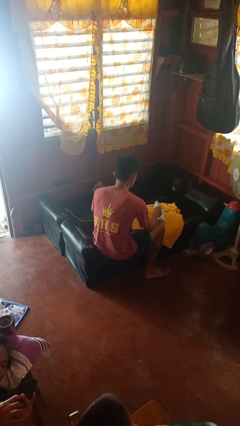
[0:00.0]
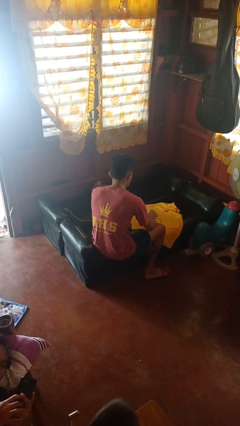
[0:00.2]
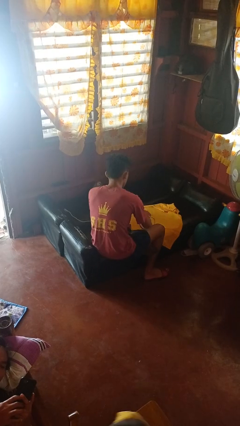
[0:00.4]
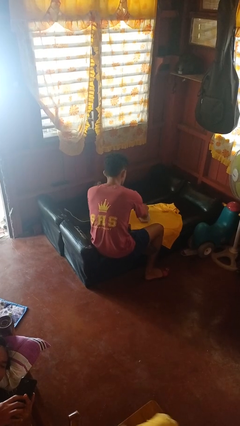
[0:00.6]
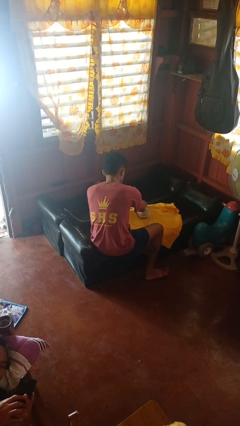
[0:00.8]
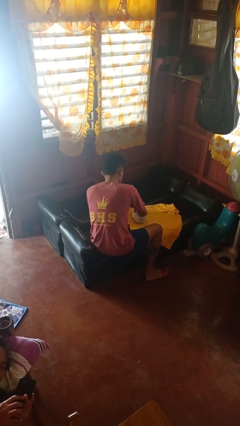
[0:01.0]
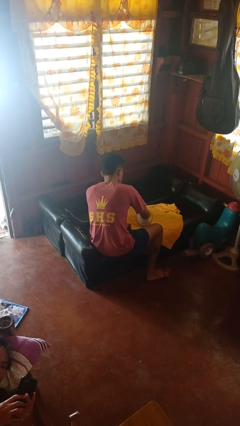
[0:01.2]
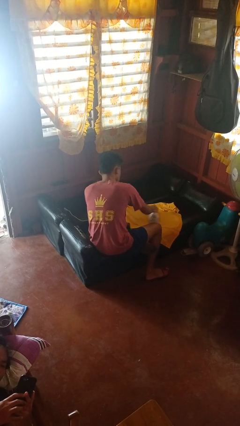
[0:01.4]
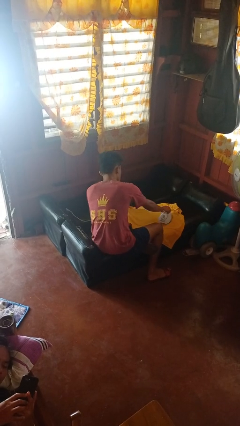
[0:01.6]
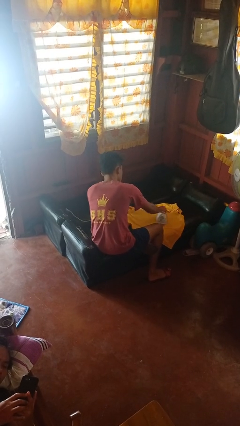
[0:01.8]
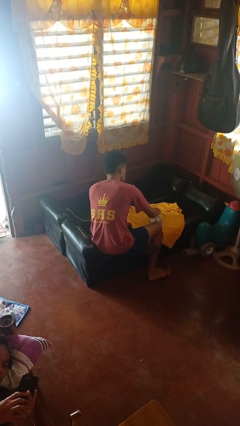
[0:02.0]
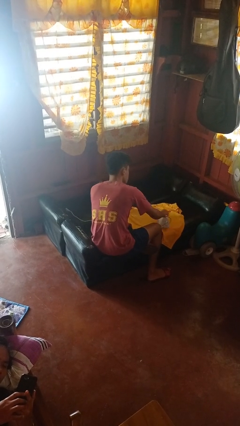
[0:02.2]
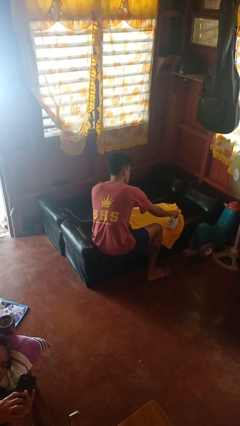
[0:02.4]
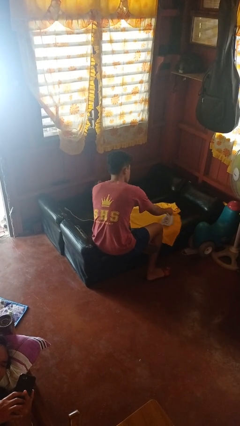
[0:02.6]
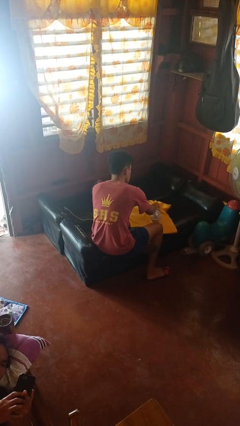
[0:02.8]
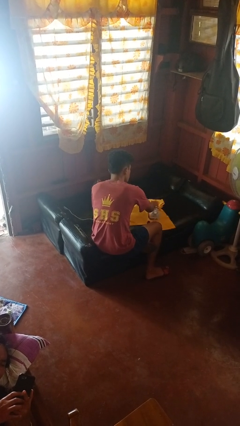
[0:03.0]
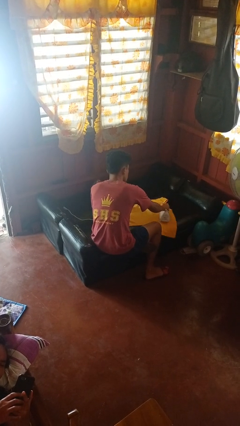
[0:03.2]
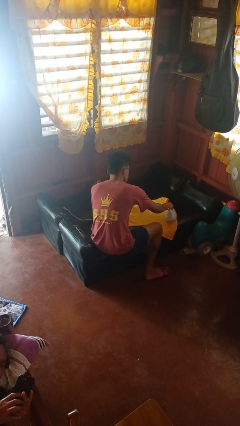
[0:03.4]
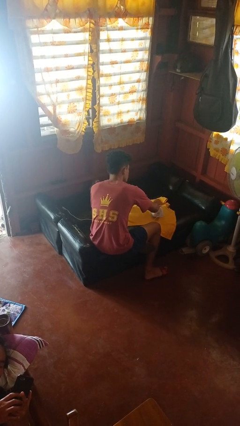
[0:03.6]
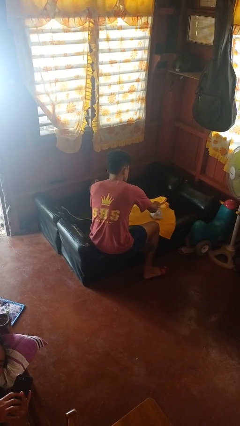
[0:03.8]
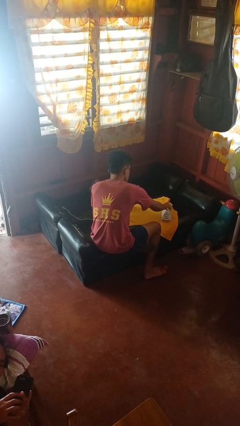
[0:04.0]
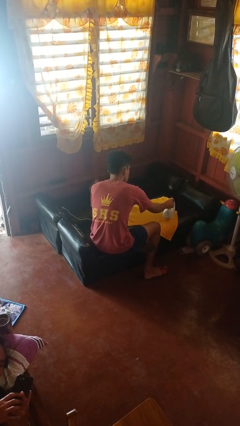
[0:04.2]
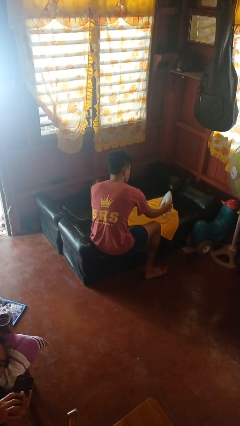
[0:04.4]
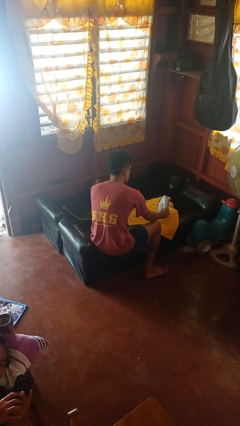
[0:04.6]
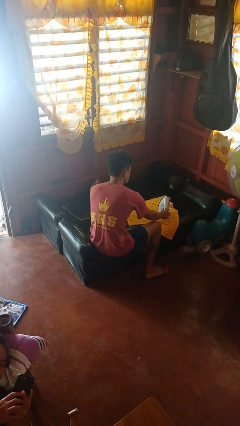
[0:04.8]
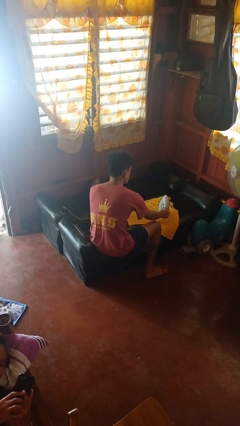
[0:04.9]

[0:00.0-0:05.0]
person irons clothes

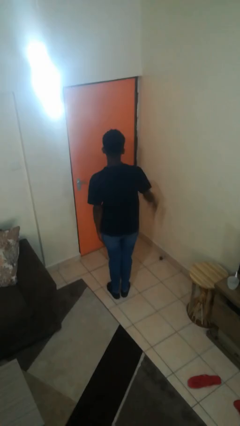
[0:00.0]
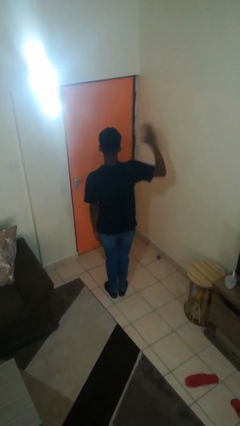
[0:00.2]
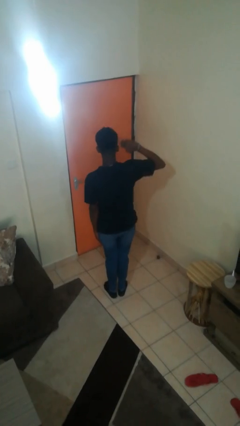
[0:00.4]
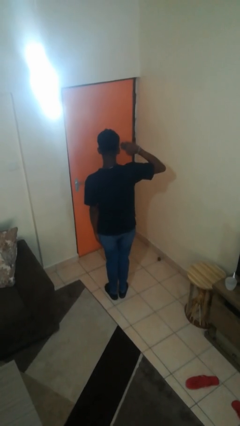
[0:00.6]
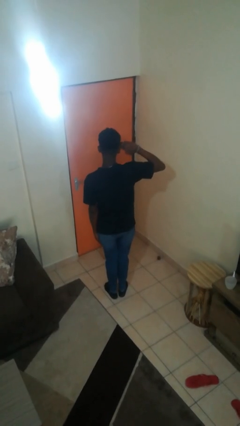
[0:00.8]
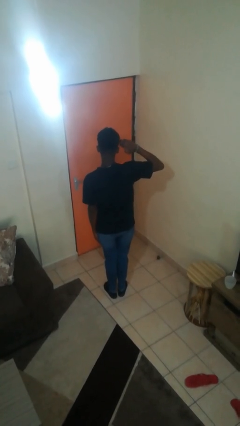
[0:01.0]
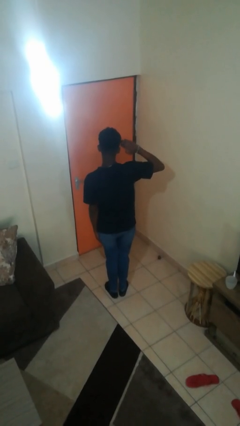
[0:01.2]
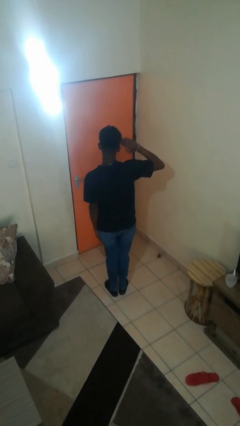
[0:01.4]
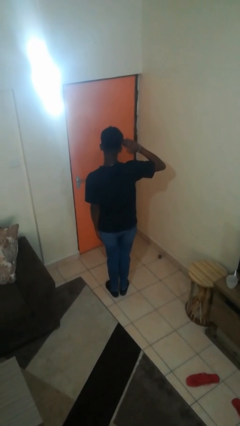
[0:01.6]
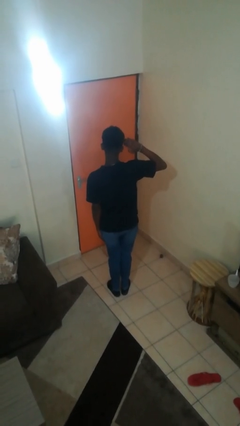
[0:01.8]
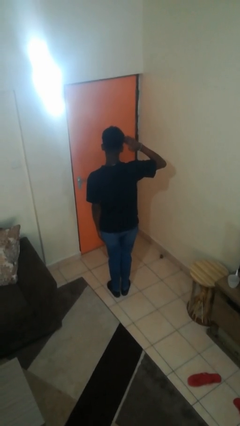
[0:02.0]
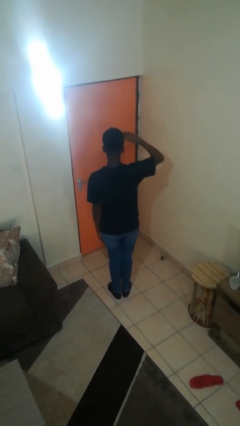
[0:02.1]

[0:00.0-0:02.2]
person salutes

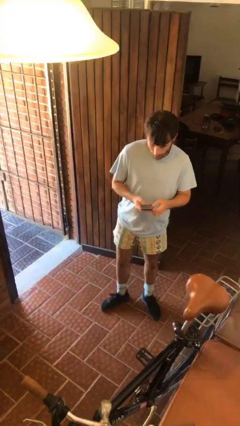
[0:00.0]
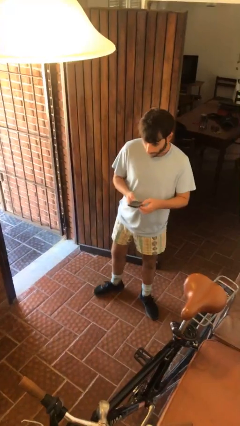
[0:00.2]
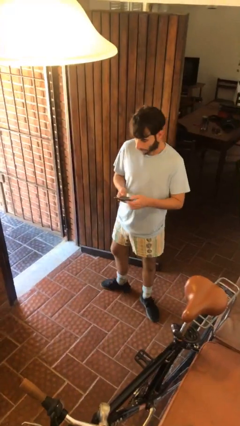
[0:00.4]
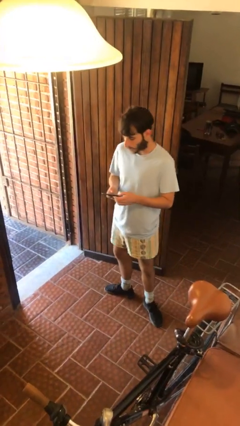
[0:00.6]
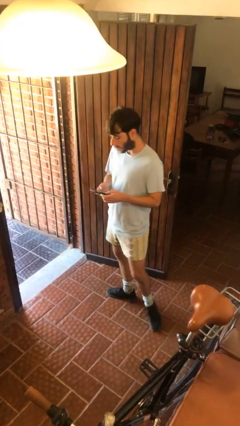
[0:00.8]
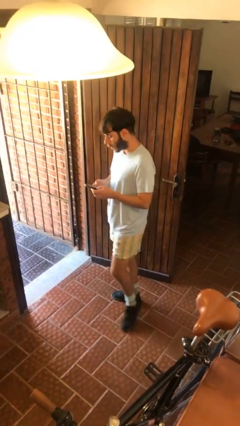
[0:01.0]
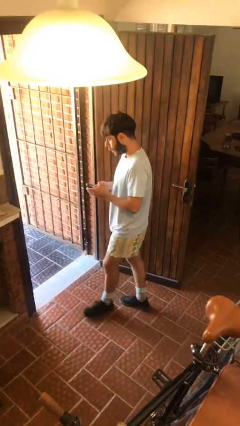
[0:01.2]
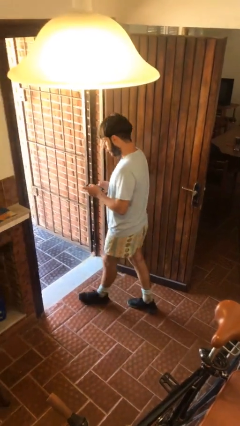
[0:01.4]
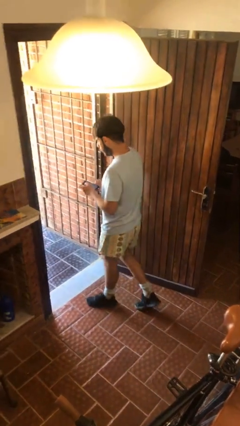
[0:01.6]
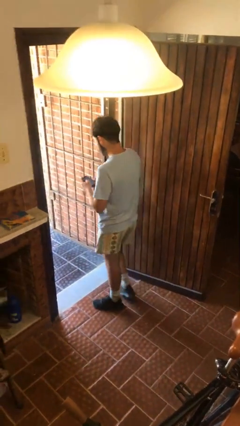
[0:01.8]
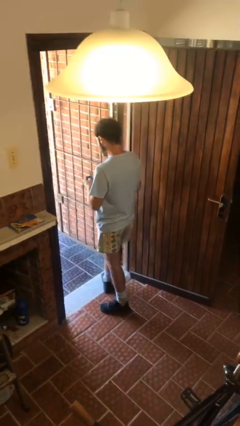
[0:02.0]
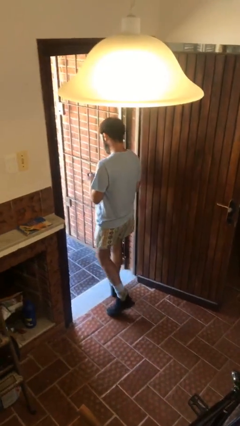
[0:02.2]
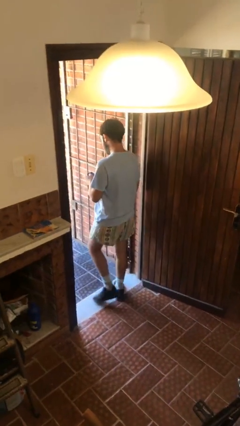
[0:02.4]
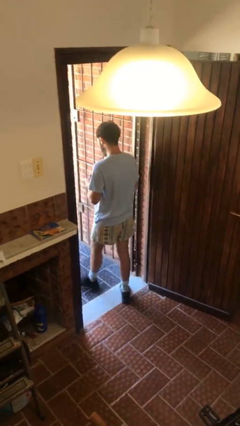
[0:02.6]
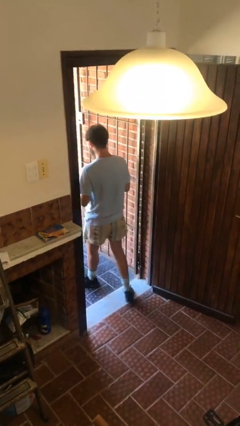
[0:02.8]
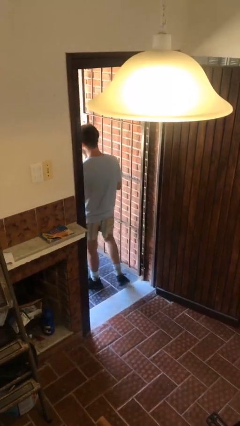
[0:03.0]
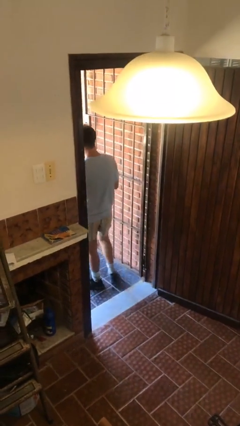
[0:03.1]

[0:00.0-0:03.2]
person exits scene through structure

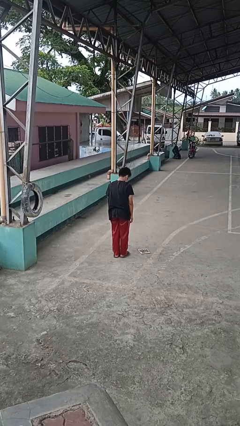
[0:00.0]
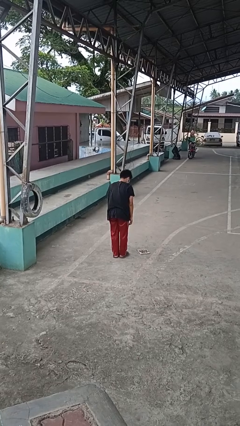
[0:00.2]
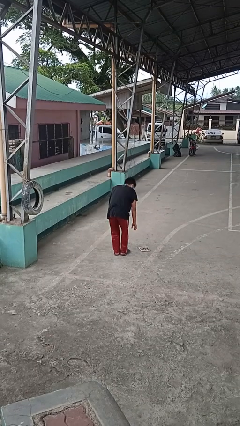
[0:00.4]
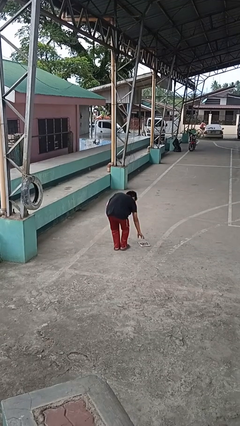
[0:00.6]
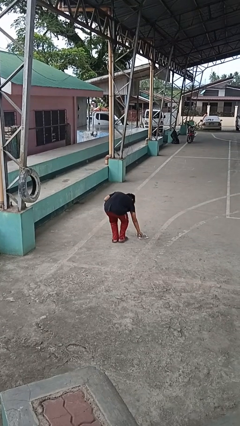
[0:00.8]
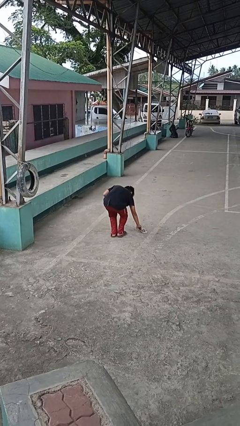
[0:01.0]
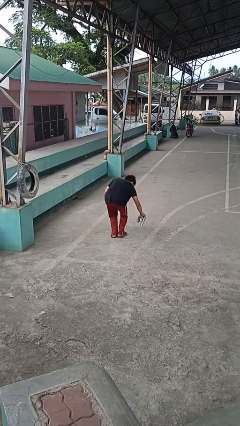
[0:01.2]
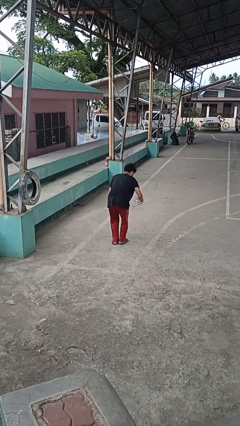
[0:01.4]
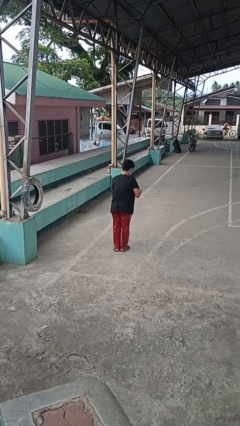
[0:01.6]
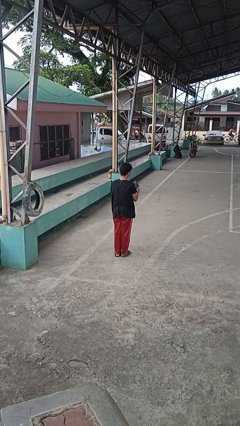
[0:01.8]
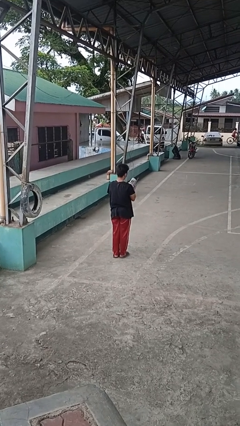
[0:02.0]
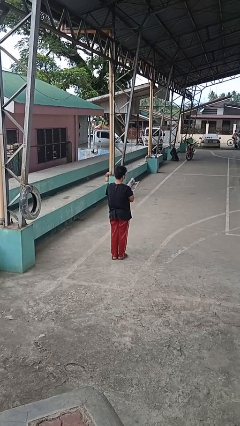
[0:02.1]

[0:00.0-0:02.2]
person picks up object from floor

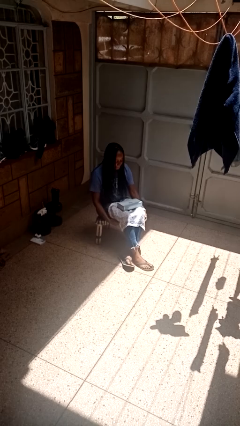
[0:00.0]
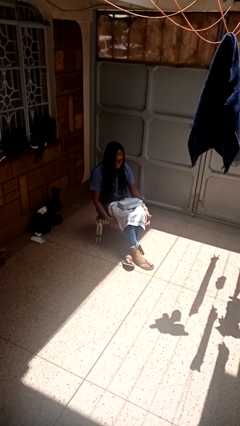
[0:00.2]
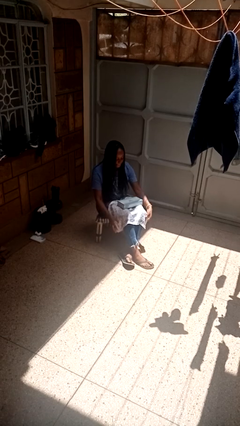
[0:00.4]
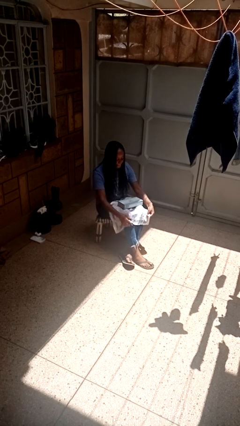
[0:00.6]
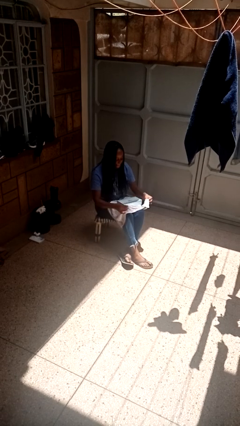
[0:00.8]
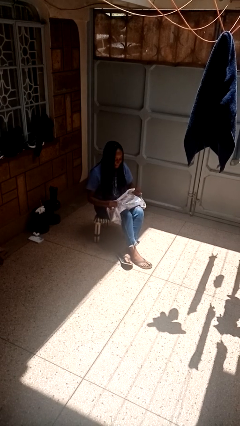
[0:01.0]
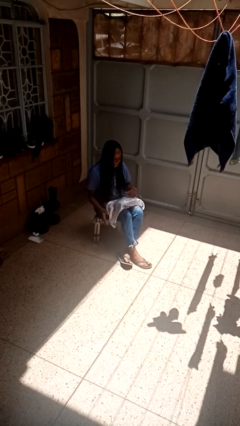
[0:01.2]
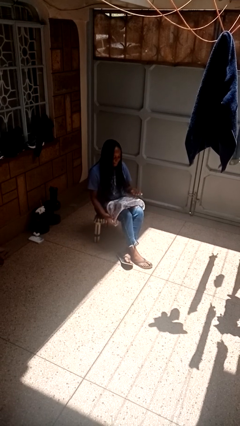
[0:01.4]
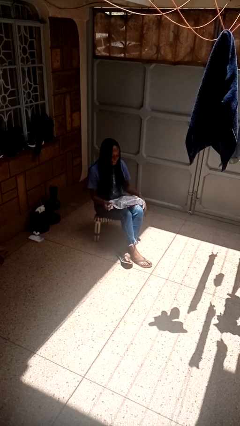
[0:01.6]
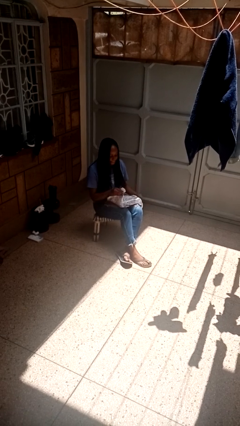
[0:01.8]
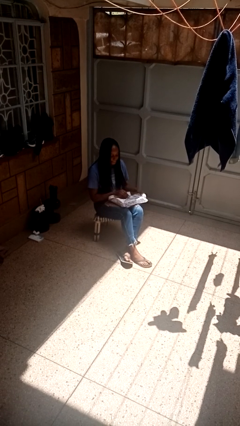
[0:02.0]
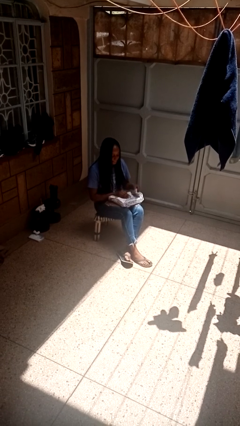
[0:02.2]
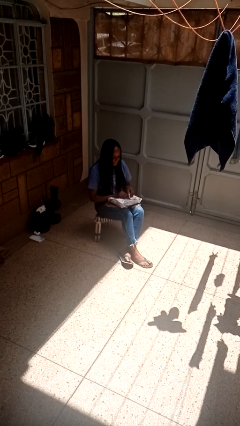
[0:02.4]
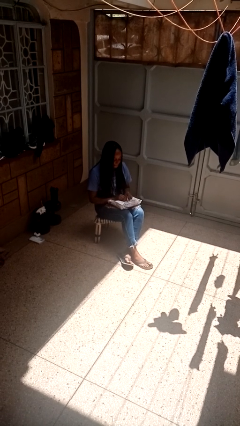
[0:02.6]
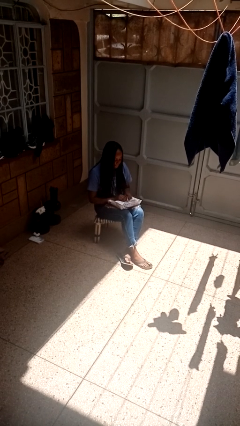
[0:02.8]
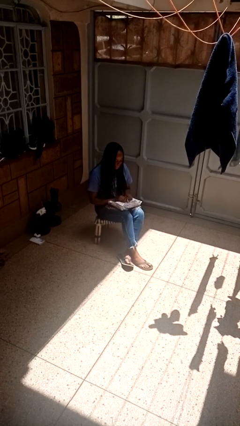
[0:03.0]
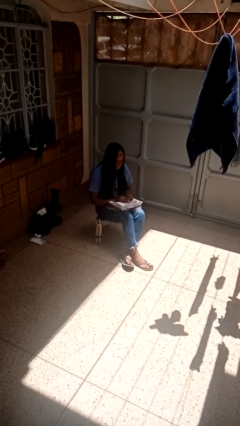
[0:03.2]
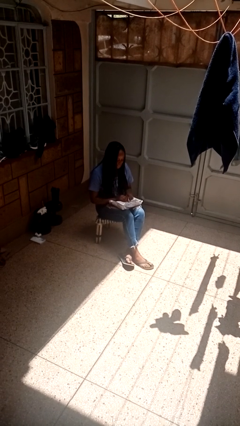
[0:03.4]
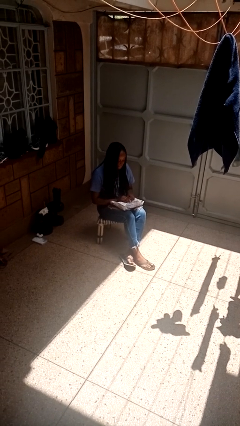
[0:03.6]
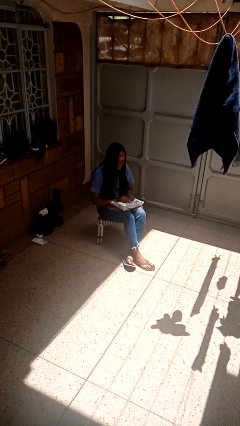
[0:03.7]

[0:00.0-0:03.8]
person wraps box

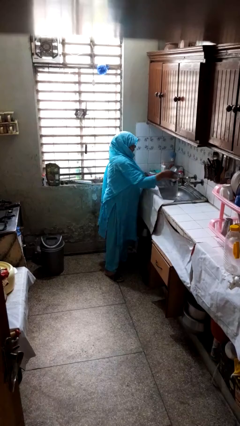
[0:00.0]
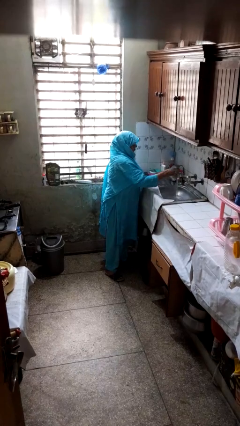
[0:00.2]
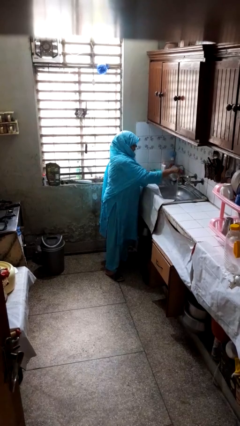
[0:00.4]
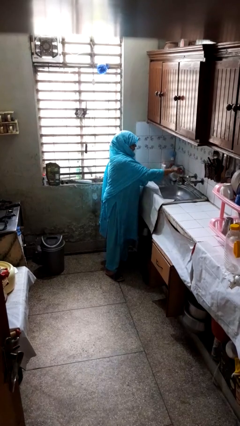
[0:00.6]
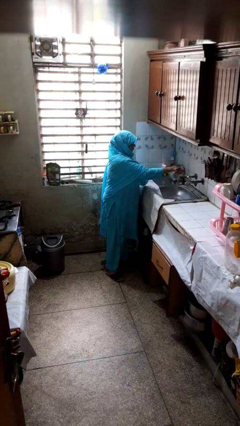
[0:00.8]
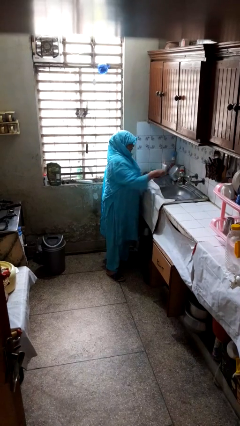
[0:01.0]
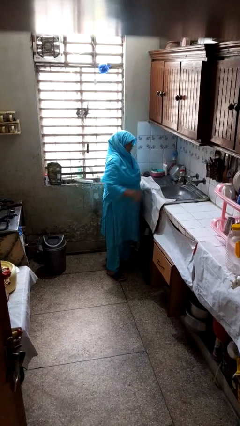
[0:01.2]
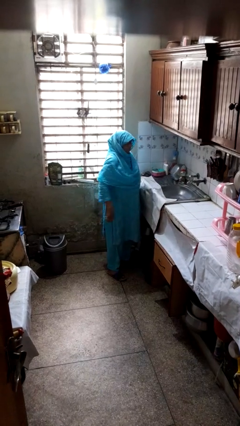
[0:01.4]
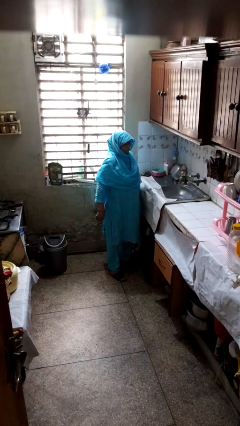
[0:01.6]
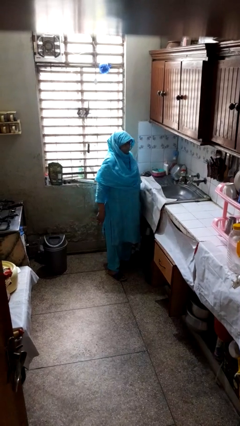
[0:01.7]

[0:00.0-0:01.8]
person turns off faucet
